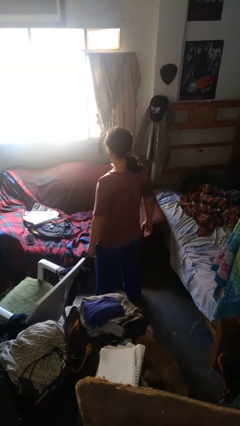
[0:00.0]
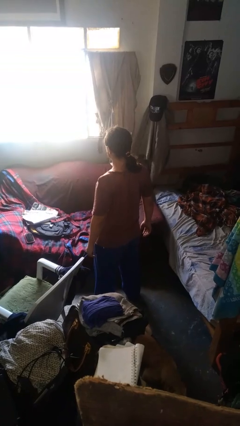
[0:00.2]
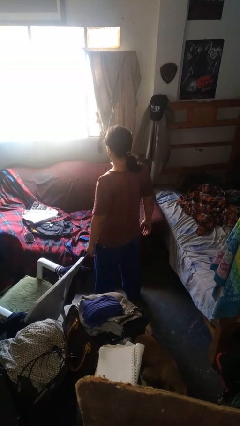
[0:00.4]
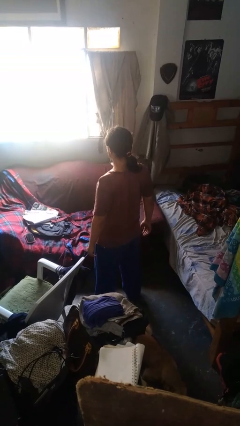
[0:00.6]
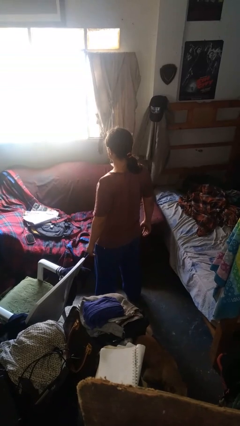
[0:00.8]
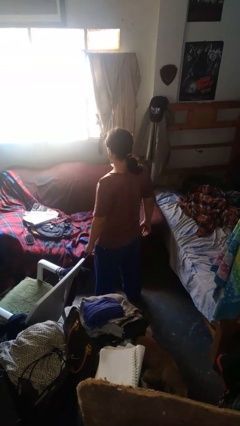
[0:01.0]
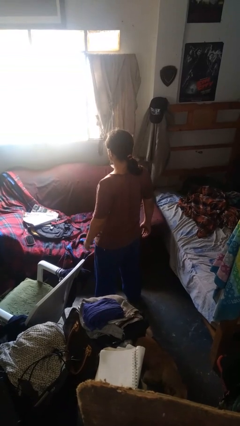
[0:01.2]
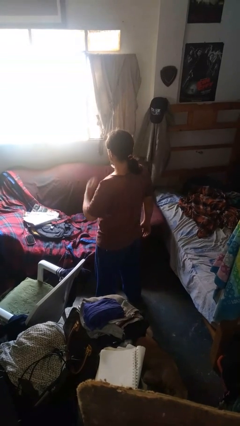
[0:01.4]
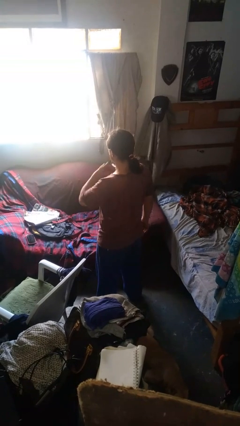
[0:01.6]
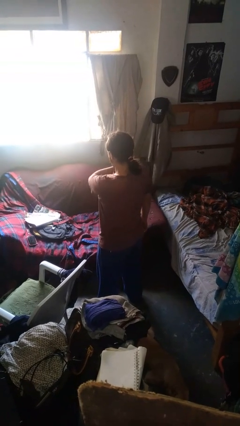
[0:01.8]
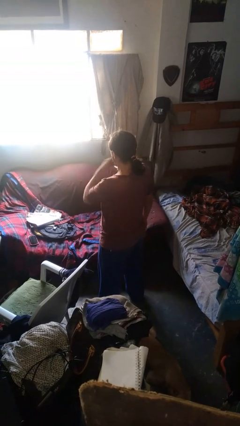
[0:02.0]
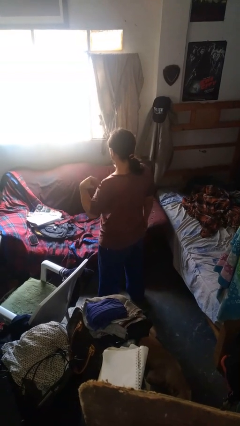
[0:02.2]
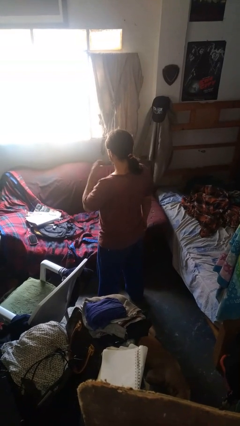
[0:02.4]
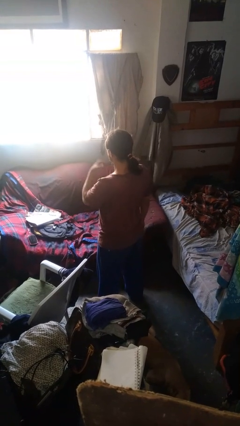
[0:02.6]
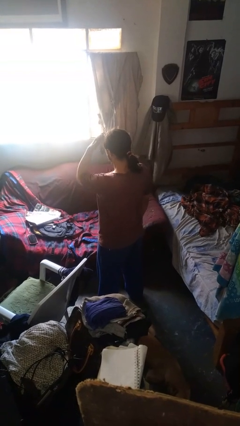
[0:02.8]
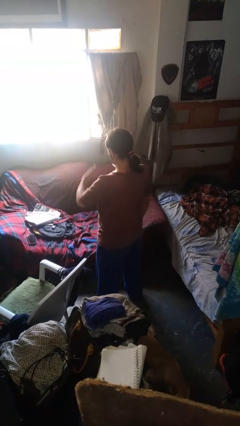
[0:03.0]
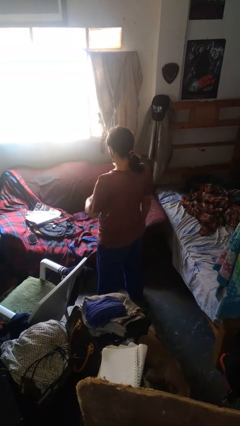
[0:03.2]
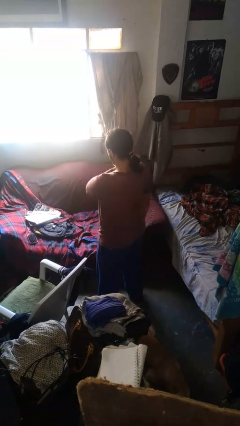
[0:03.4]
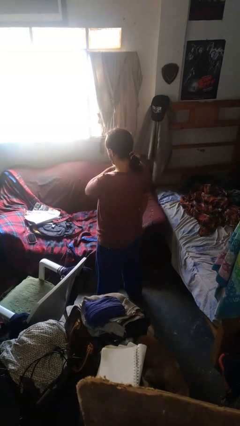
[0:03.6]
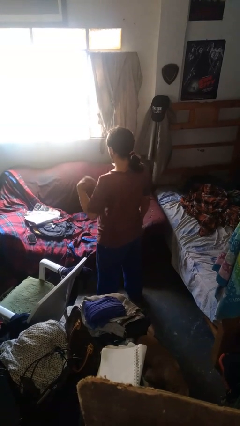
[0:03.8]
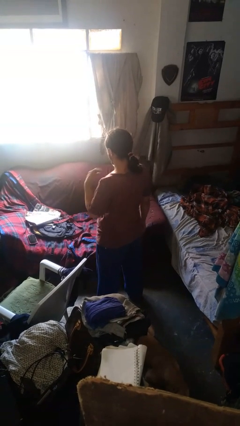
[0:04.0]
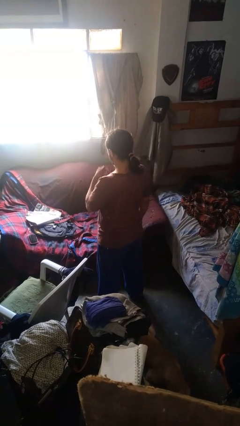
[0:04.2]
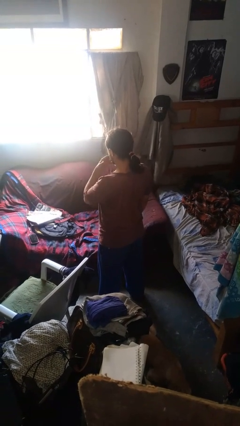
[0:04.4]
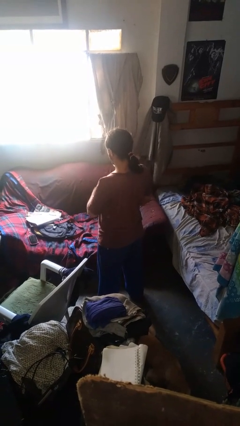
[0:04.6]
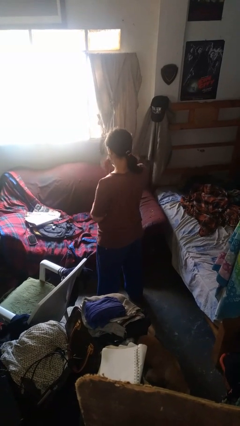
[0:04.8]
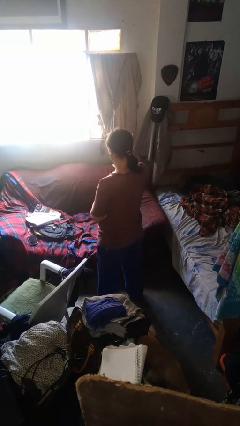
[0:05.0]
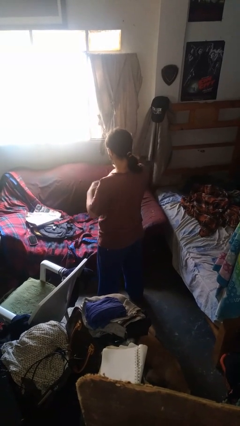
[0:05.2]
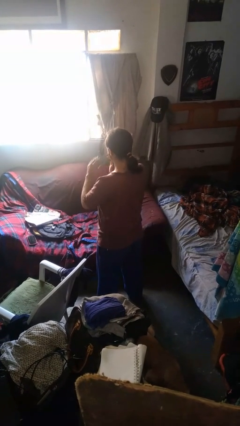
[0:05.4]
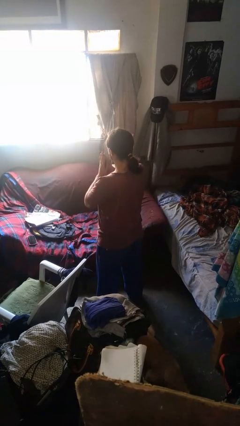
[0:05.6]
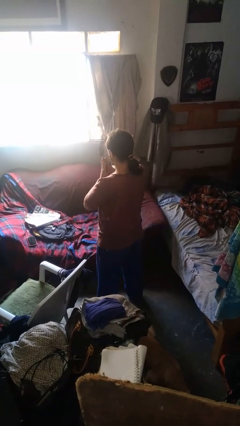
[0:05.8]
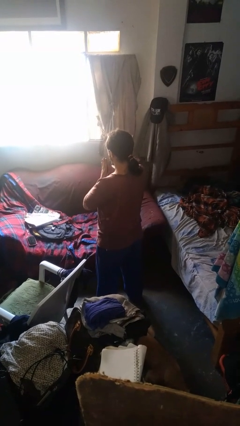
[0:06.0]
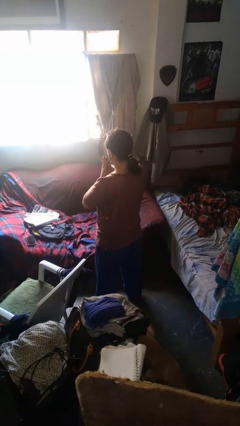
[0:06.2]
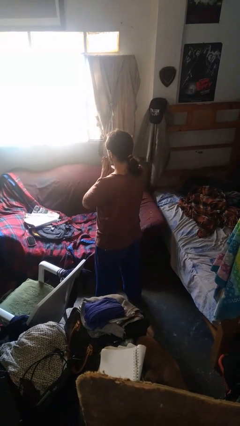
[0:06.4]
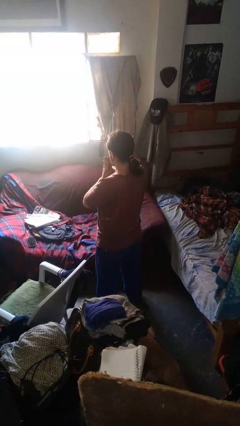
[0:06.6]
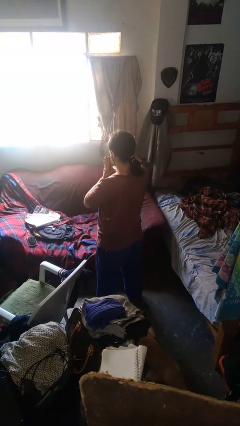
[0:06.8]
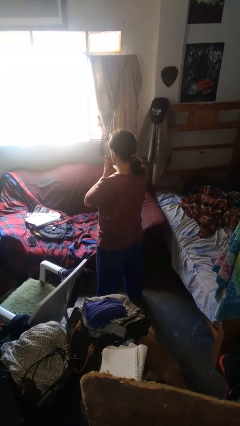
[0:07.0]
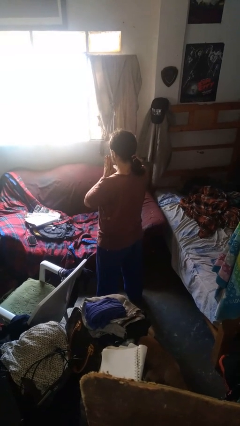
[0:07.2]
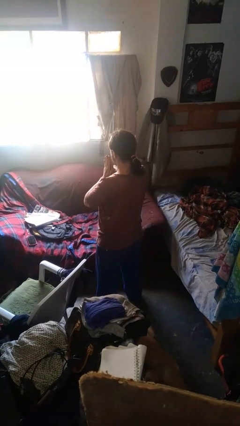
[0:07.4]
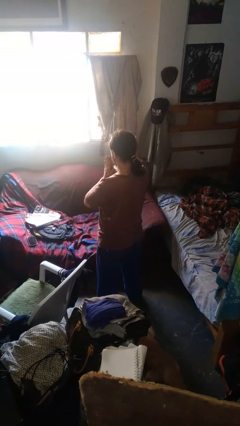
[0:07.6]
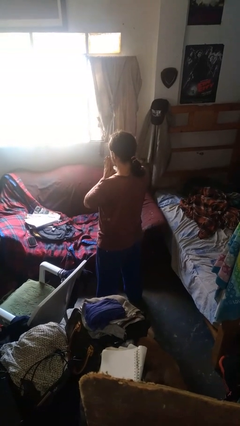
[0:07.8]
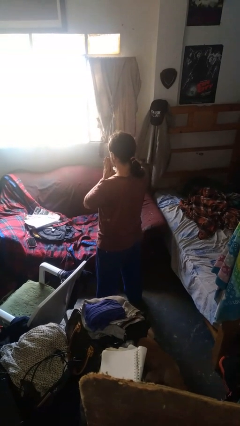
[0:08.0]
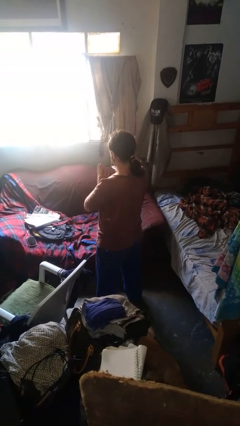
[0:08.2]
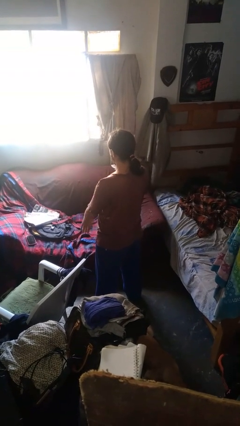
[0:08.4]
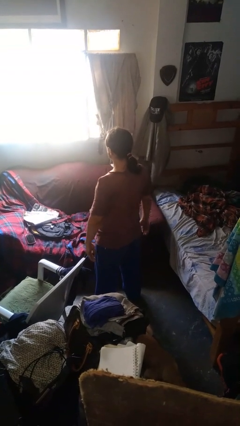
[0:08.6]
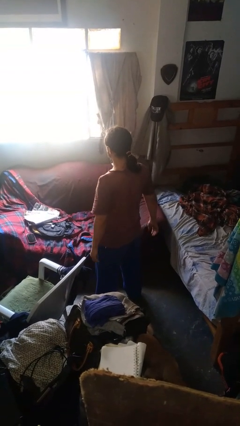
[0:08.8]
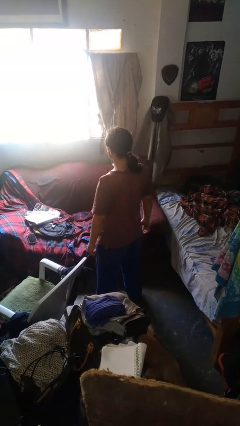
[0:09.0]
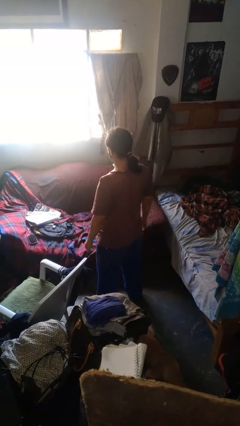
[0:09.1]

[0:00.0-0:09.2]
person prays

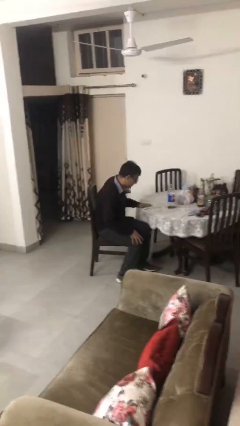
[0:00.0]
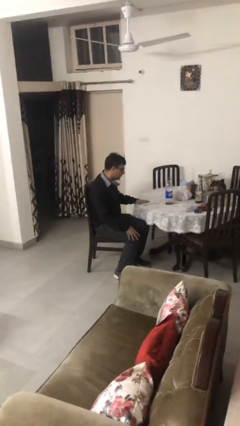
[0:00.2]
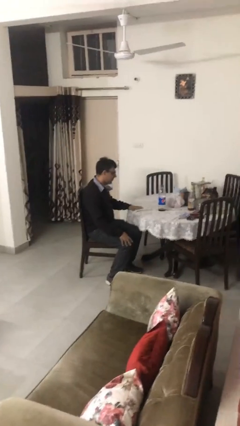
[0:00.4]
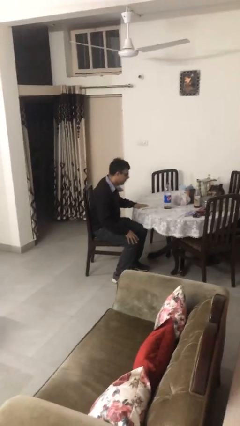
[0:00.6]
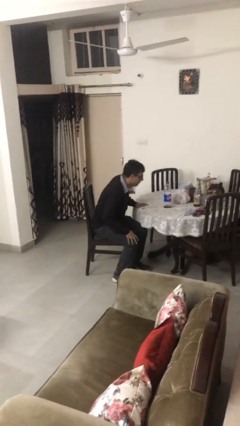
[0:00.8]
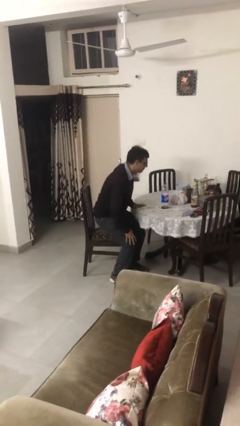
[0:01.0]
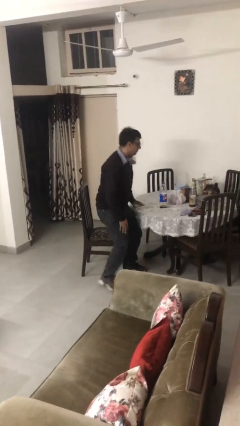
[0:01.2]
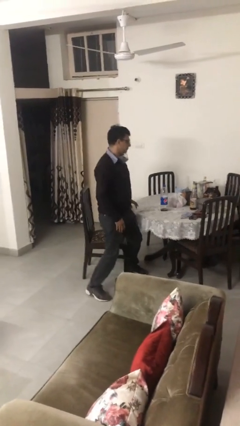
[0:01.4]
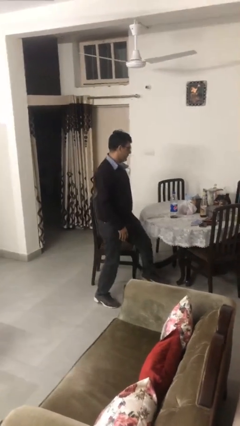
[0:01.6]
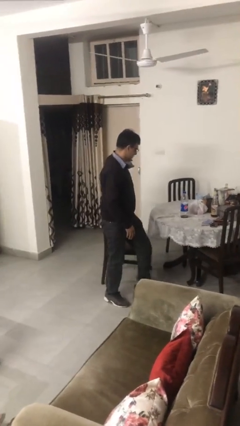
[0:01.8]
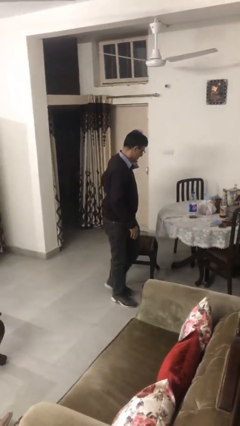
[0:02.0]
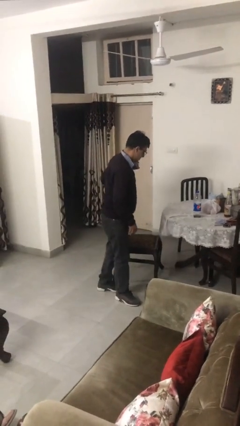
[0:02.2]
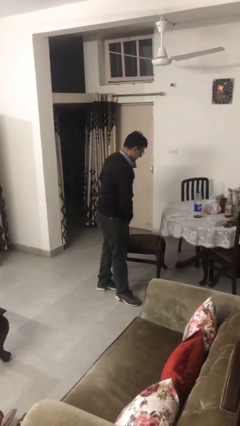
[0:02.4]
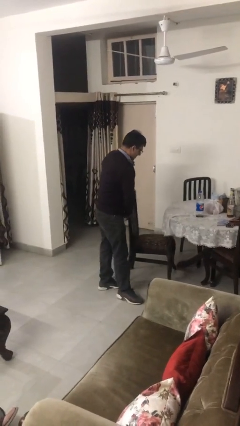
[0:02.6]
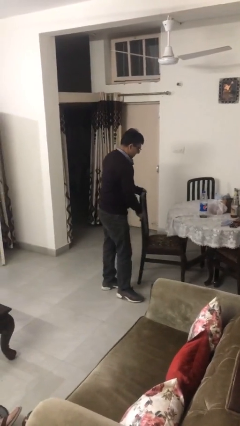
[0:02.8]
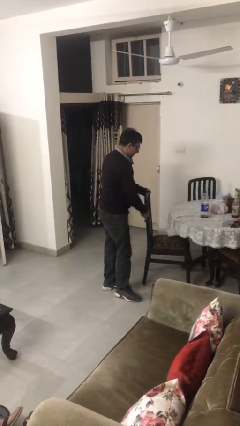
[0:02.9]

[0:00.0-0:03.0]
person stands up

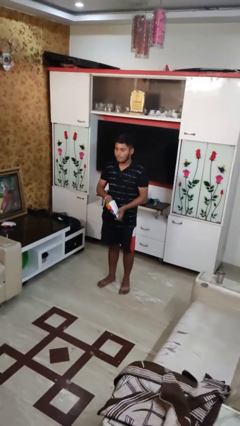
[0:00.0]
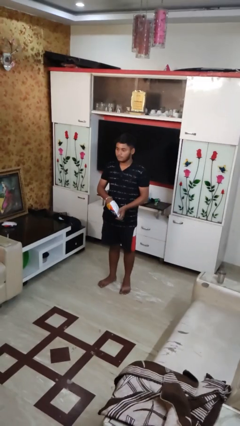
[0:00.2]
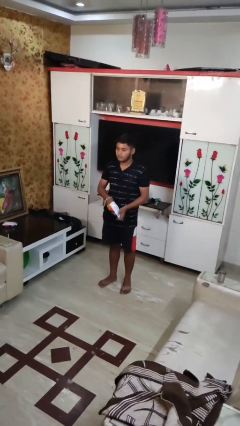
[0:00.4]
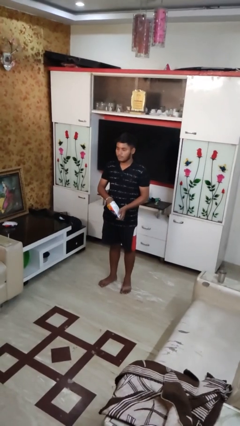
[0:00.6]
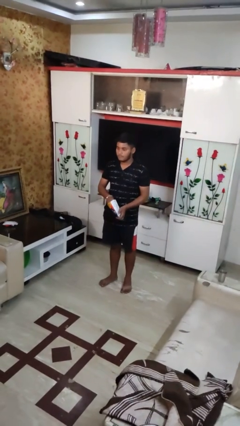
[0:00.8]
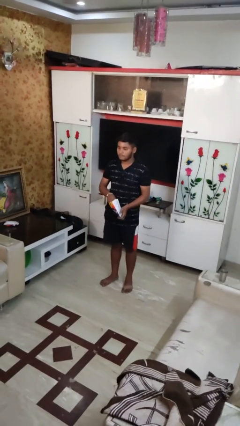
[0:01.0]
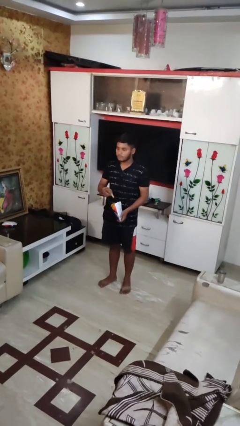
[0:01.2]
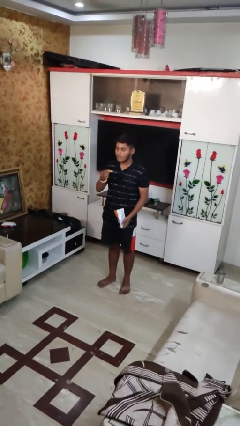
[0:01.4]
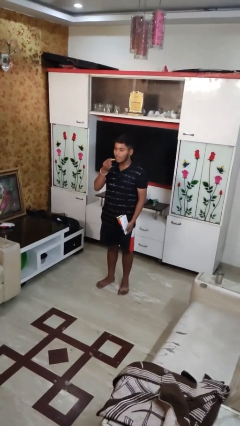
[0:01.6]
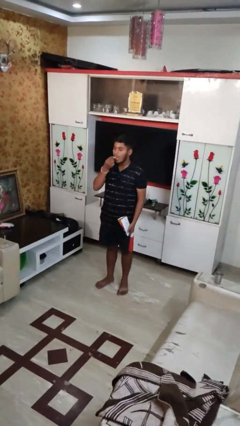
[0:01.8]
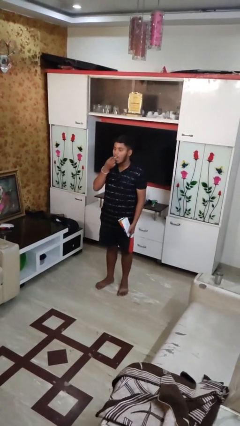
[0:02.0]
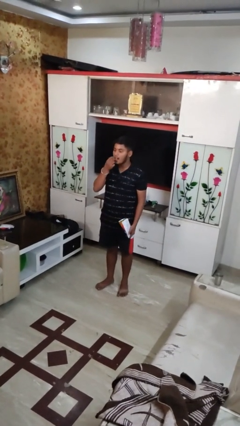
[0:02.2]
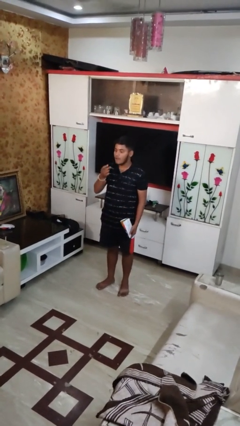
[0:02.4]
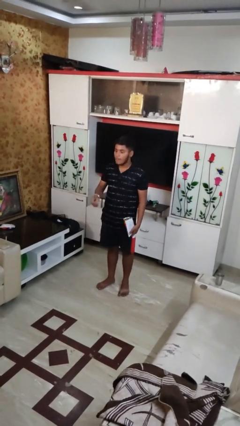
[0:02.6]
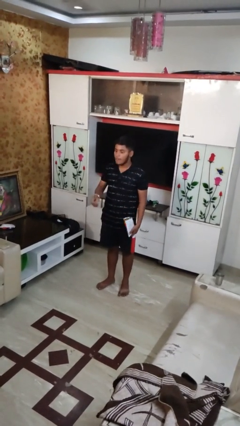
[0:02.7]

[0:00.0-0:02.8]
person eats snack from bag

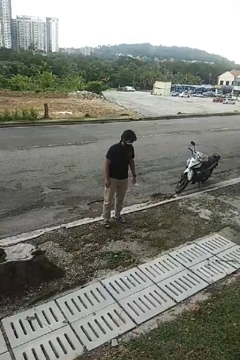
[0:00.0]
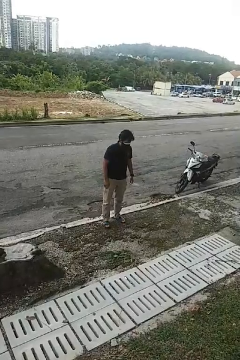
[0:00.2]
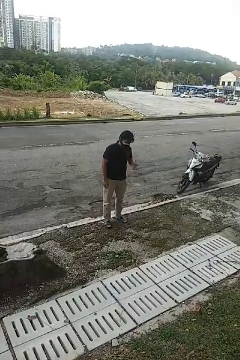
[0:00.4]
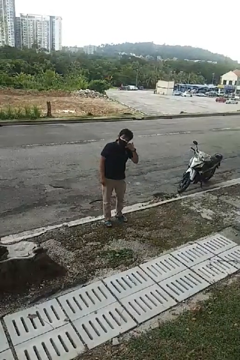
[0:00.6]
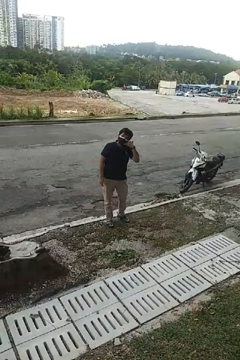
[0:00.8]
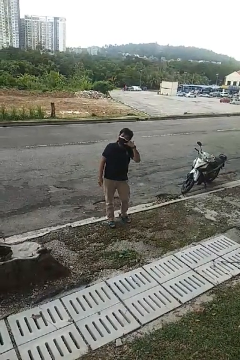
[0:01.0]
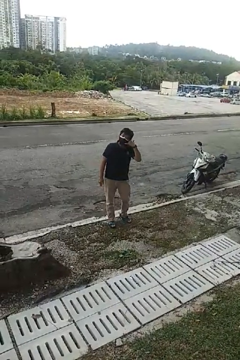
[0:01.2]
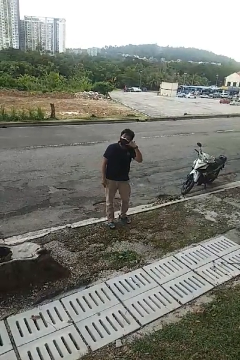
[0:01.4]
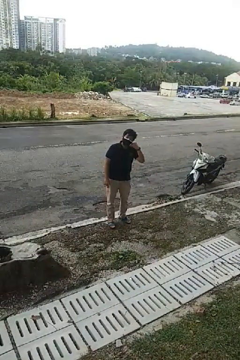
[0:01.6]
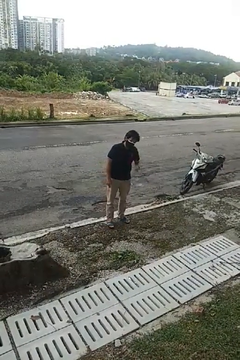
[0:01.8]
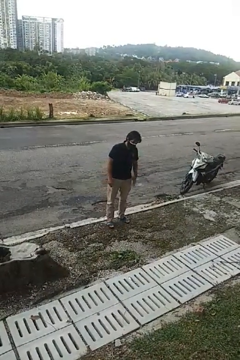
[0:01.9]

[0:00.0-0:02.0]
person gestures call me

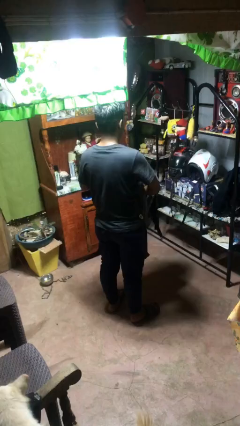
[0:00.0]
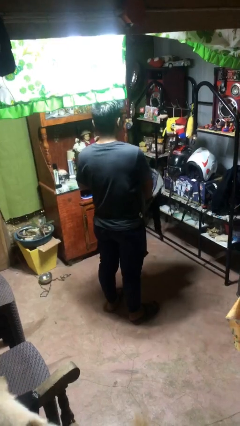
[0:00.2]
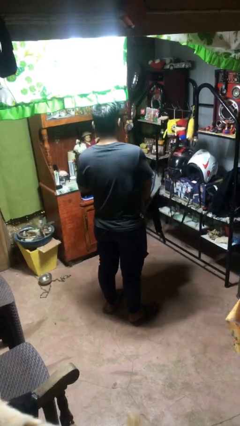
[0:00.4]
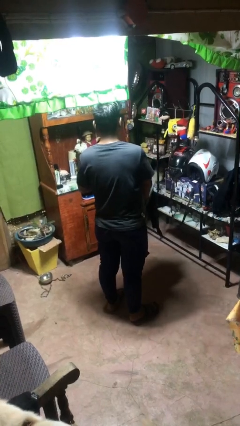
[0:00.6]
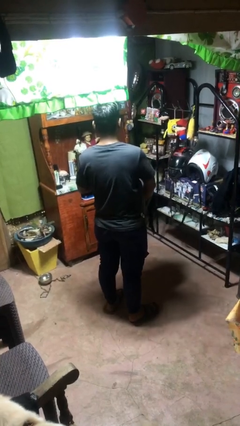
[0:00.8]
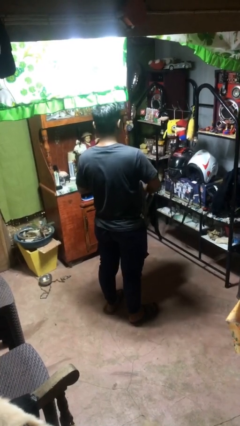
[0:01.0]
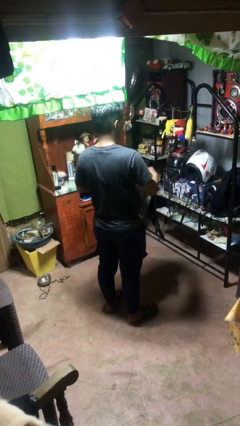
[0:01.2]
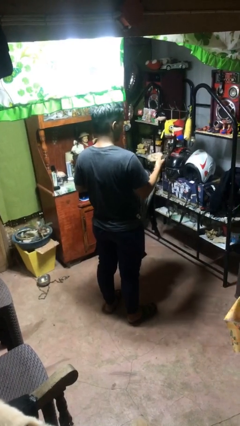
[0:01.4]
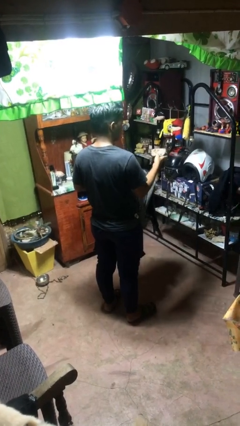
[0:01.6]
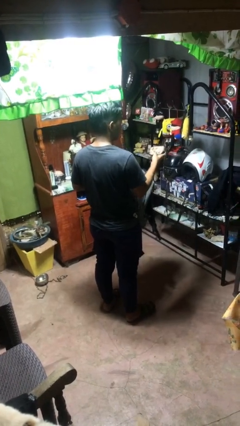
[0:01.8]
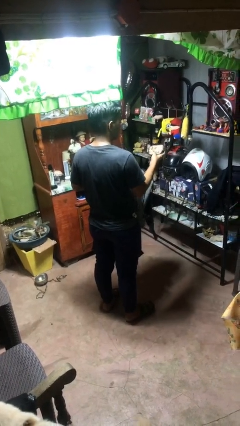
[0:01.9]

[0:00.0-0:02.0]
person takes object from bag
